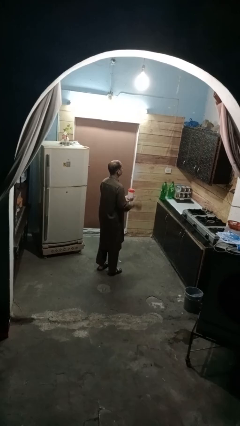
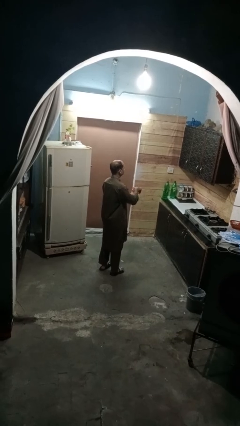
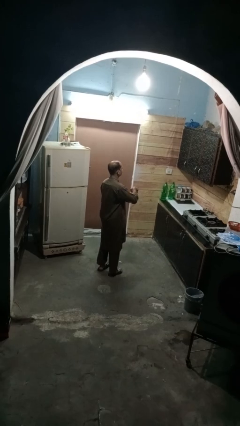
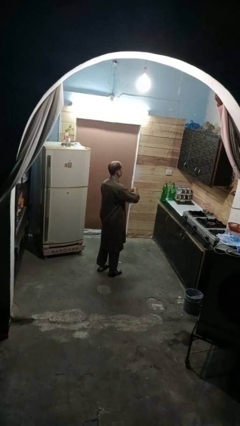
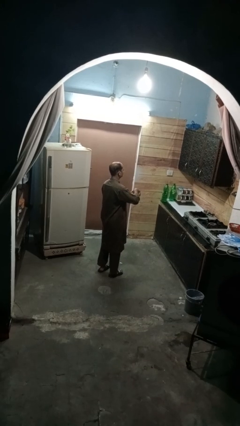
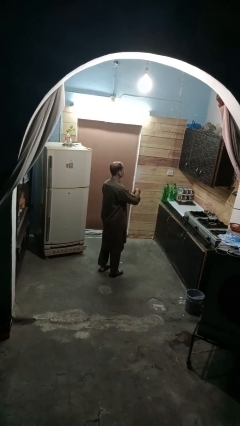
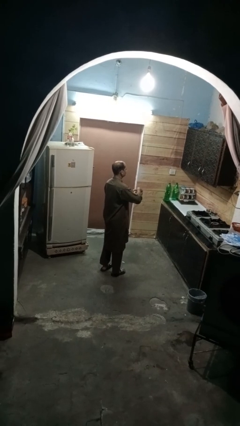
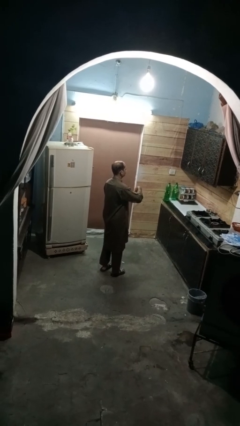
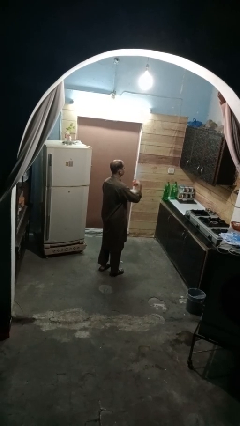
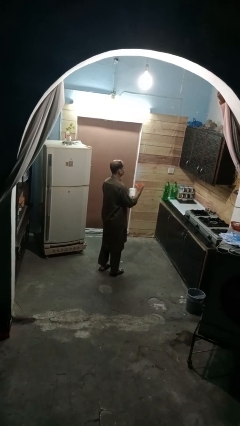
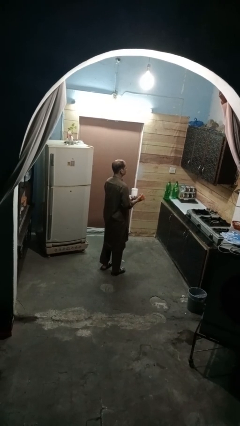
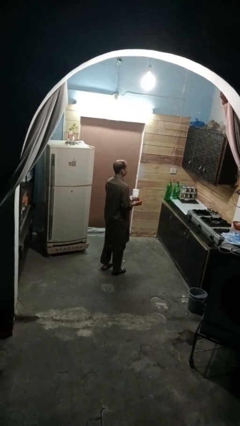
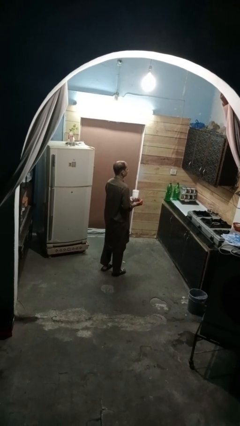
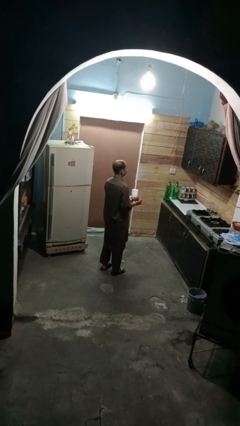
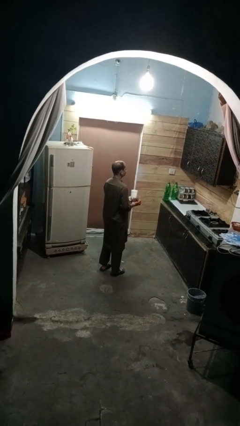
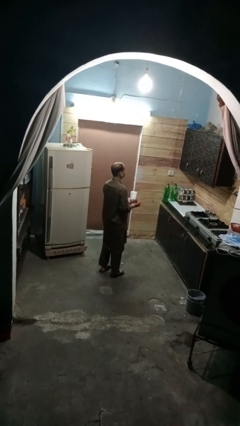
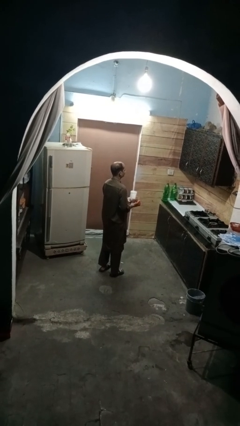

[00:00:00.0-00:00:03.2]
person opens jar

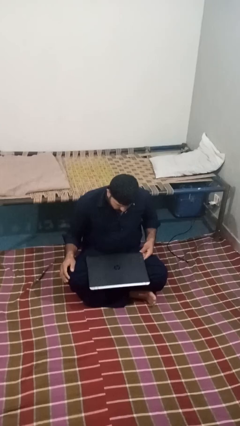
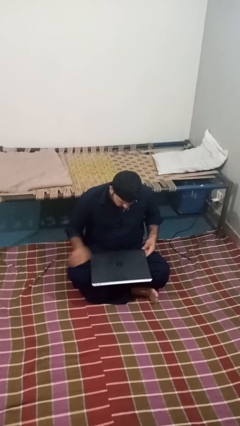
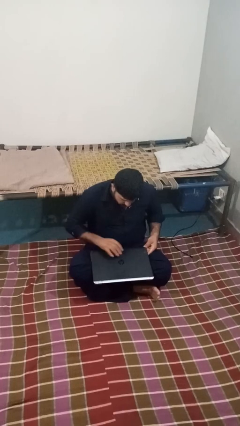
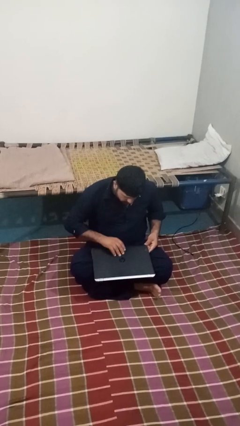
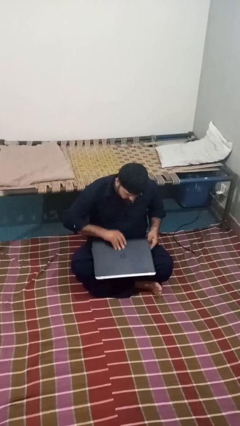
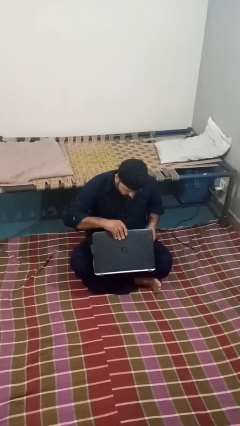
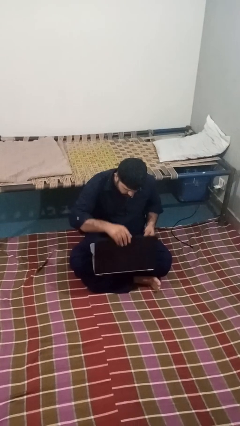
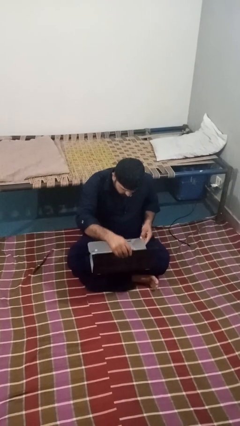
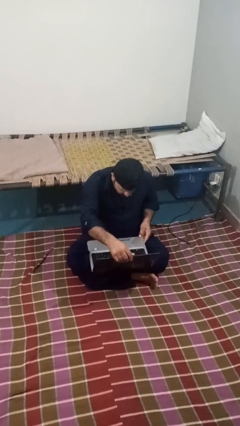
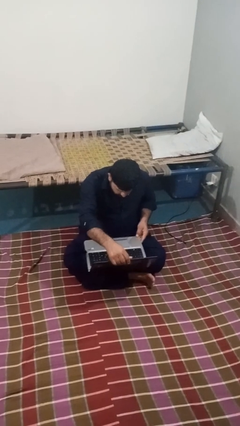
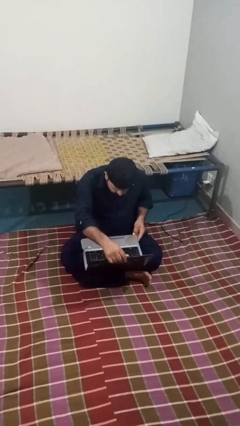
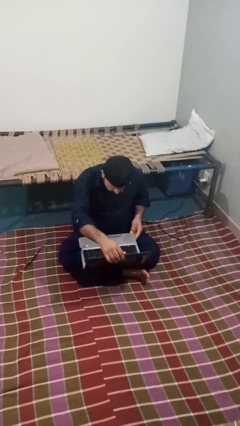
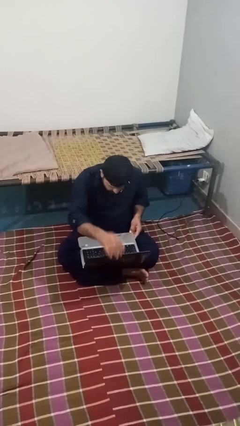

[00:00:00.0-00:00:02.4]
person opens laptop

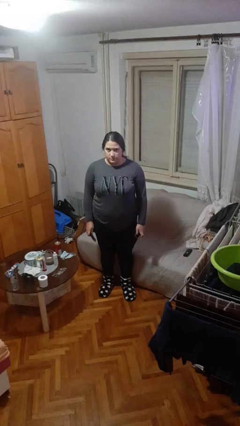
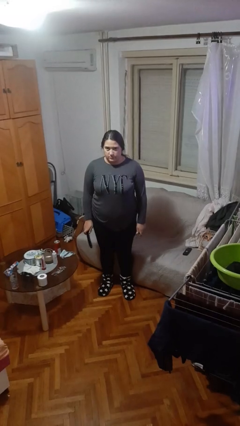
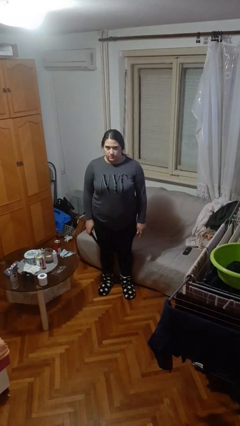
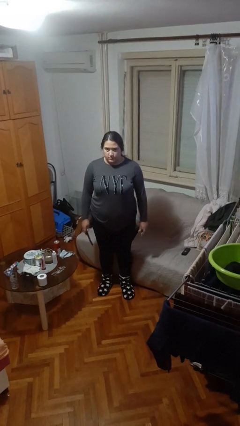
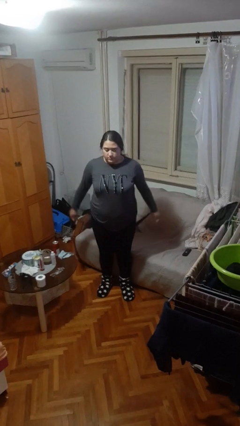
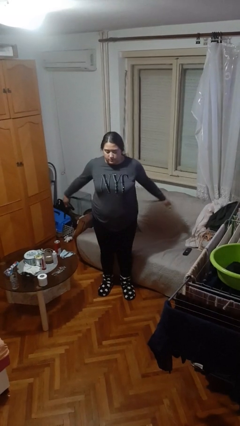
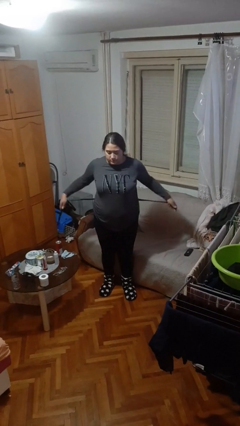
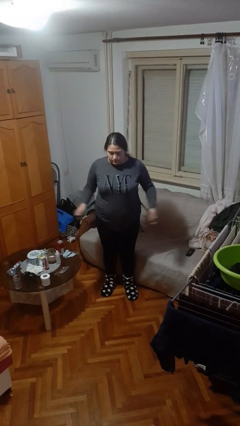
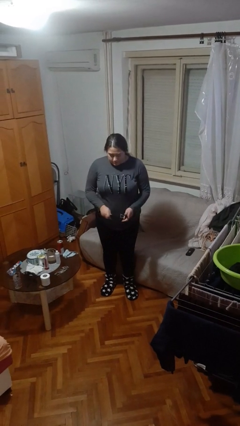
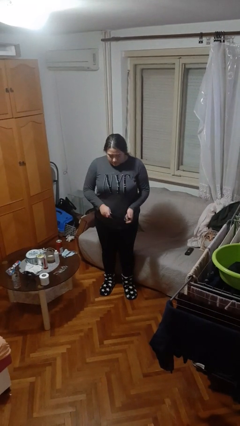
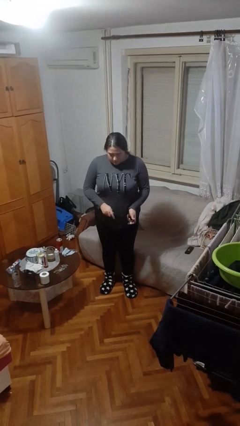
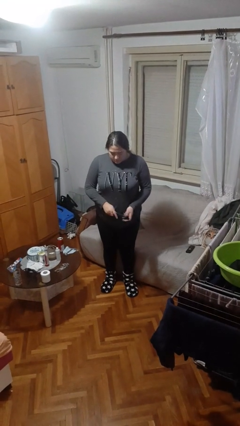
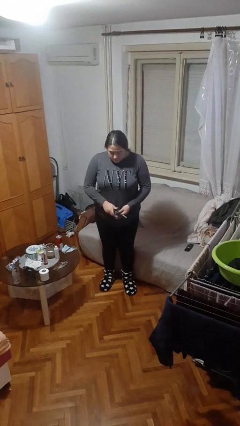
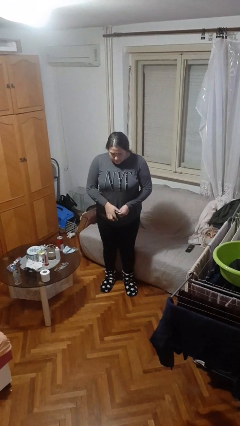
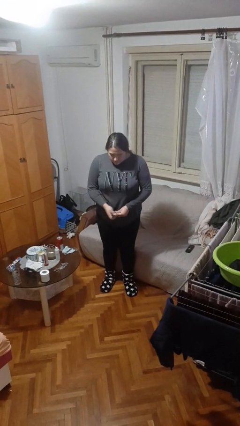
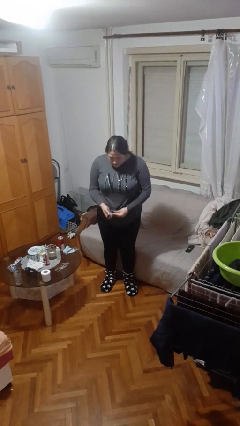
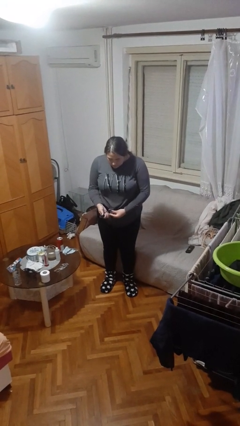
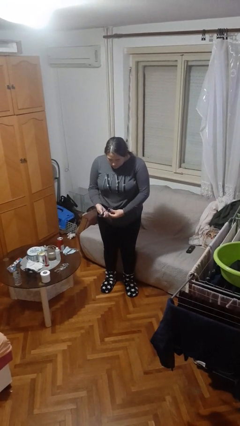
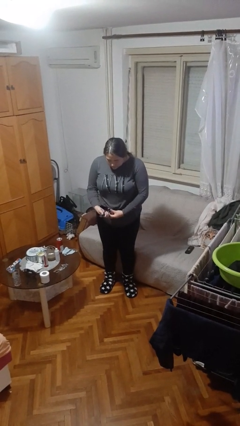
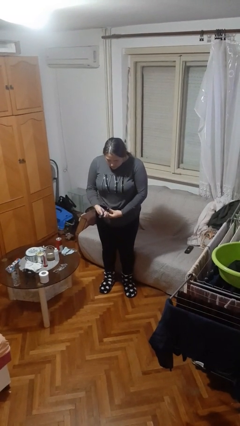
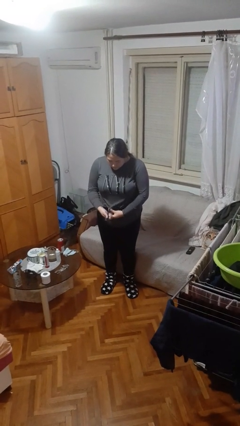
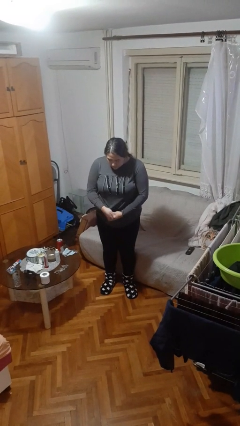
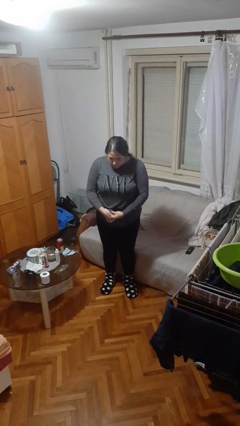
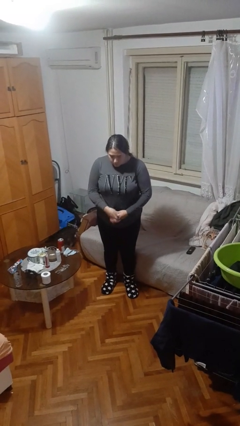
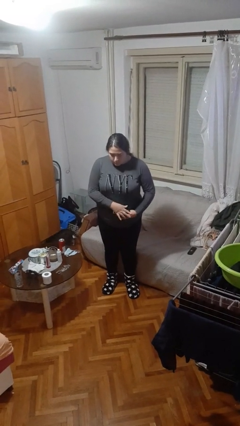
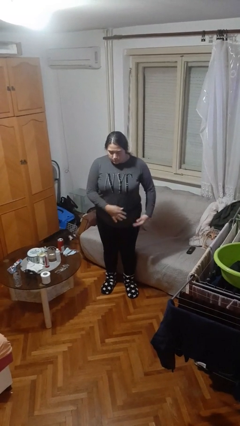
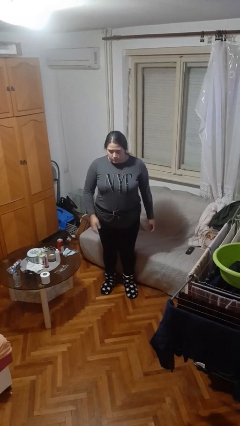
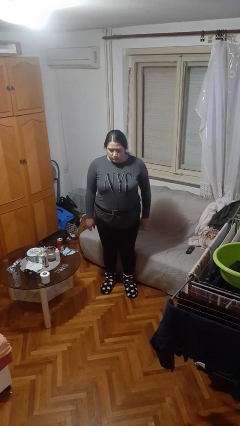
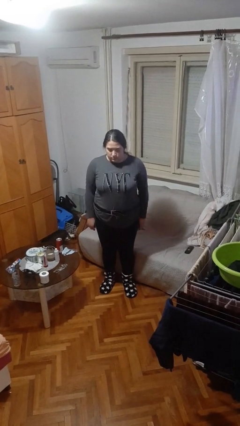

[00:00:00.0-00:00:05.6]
person puts on belt

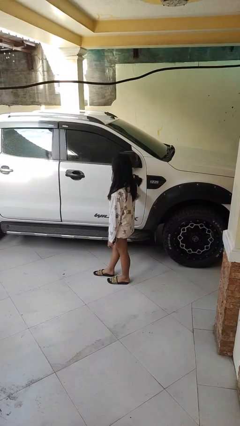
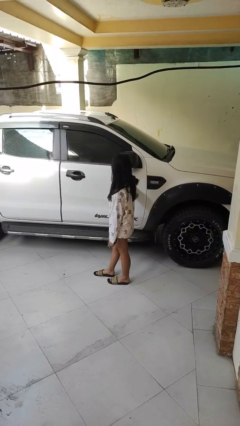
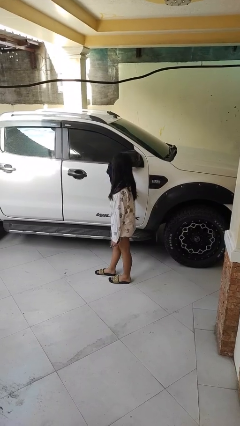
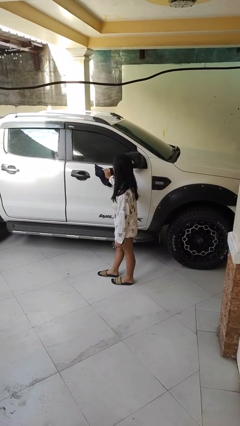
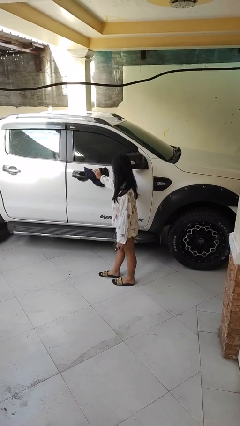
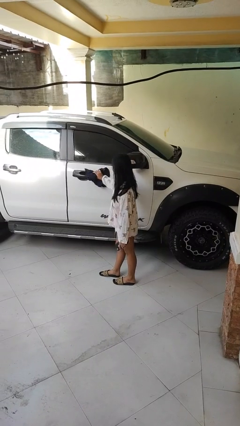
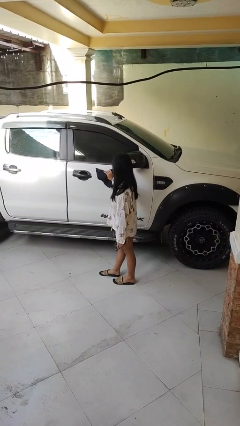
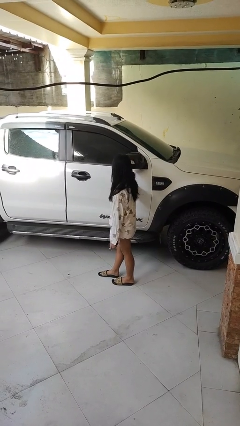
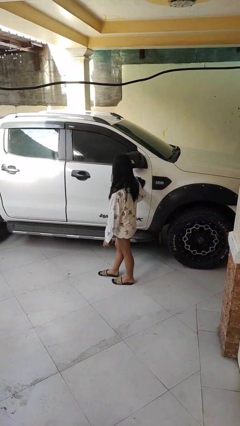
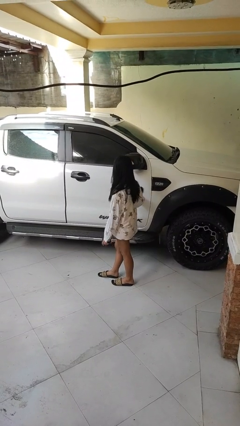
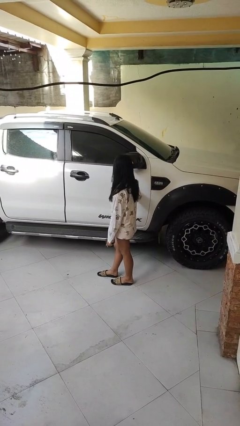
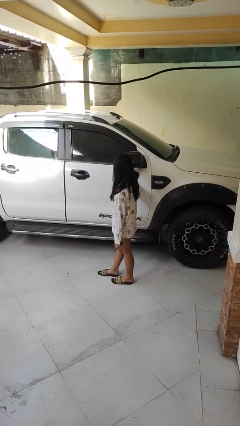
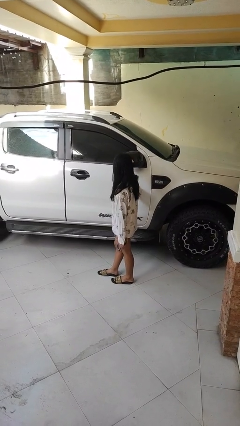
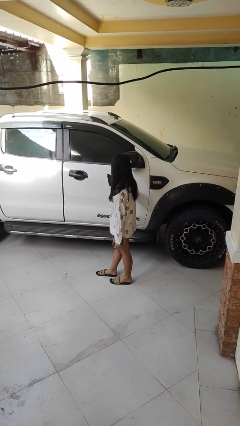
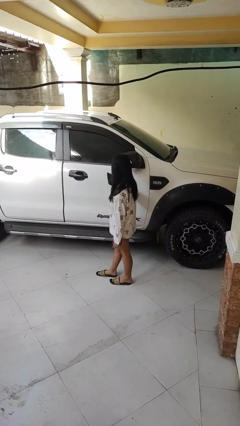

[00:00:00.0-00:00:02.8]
person polishes car with rag

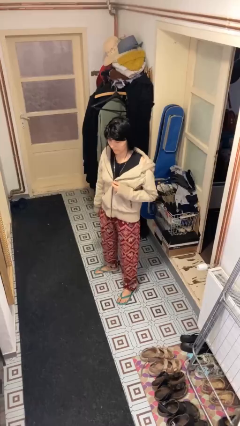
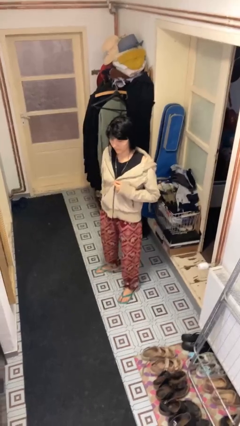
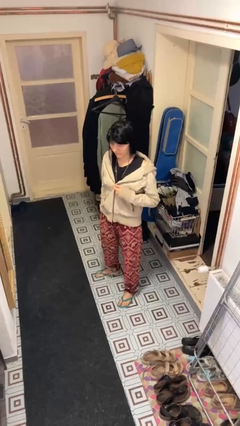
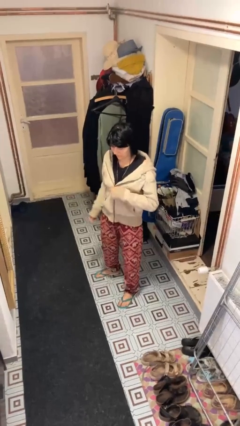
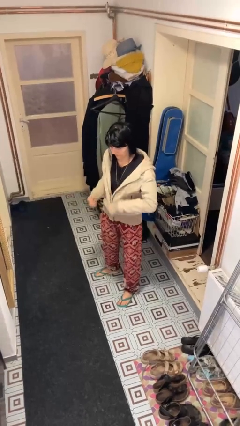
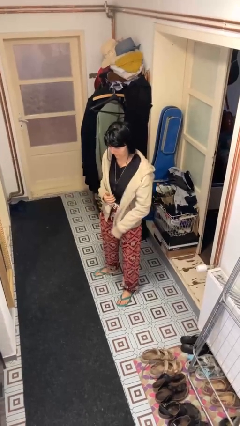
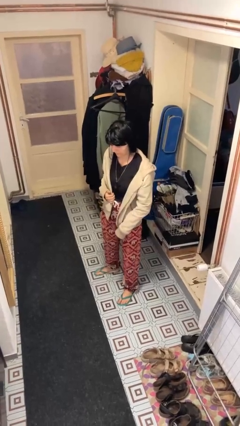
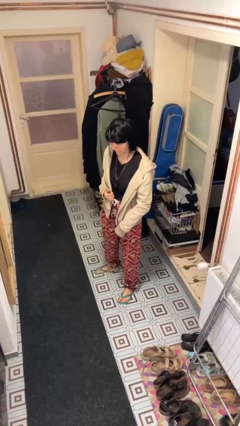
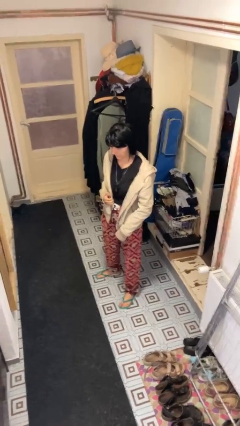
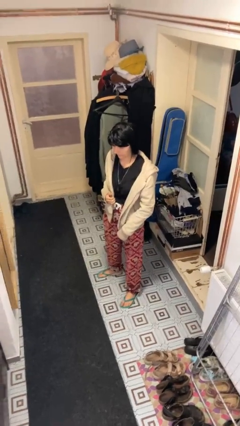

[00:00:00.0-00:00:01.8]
person unzips jacket

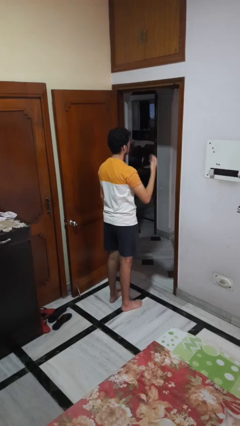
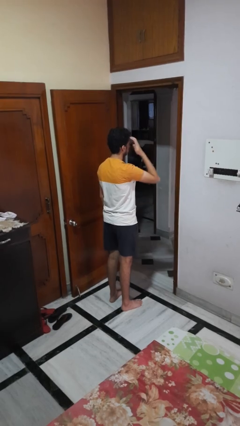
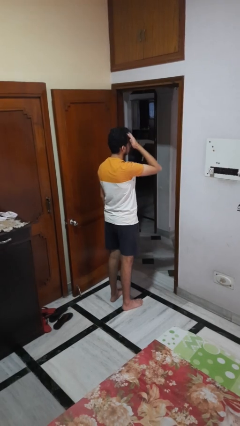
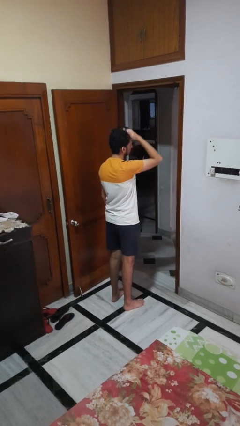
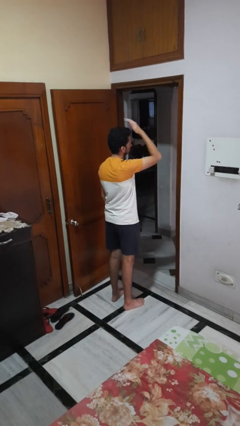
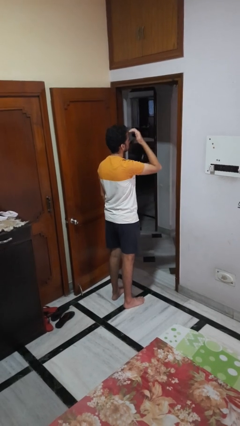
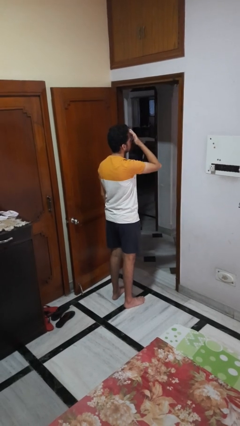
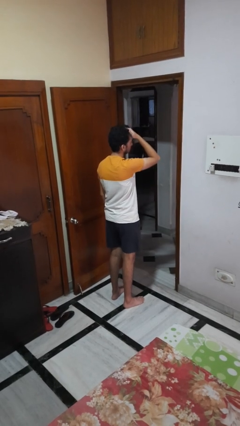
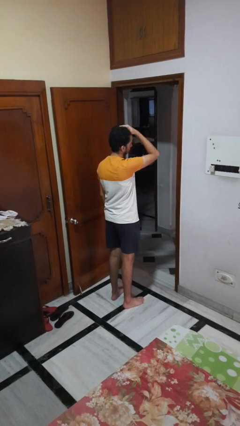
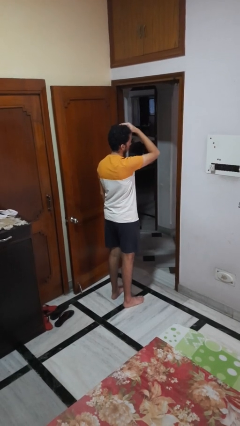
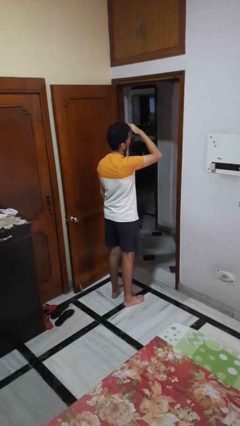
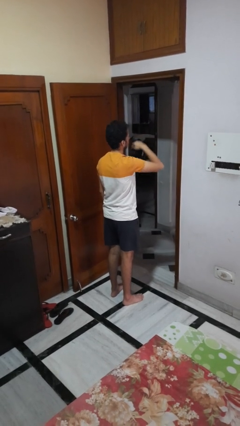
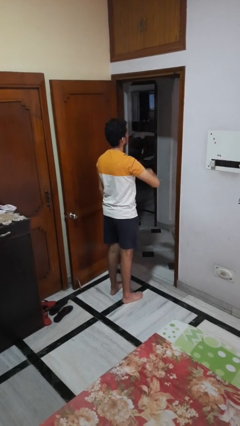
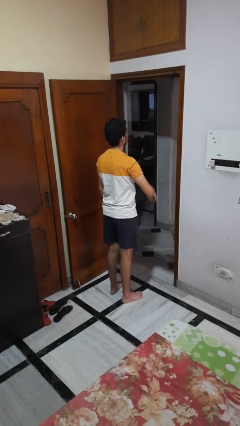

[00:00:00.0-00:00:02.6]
person strokes hair
